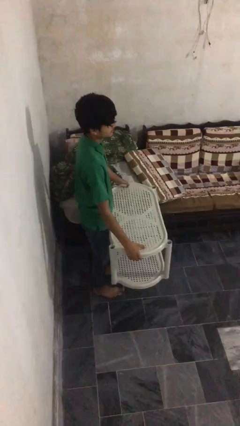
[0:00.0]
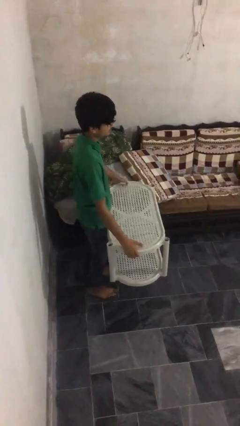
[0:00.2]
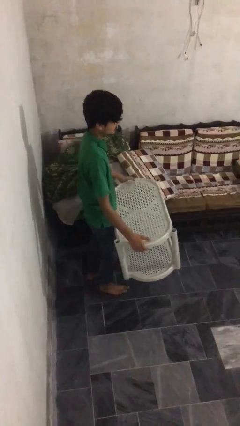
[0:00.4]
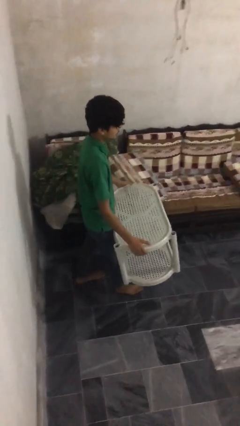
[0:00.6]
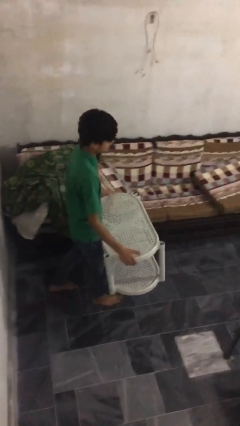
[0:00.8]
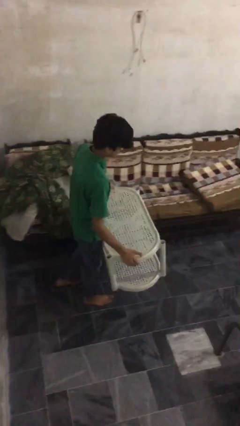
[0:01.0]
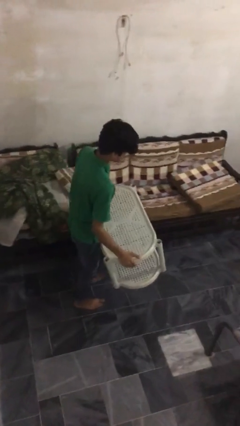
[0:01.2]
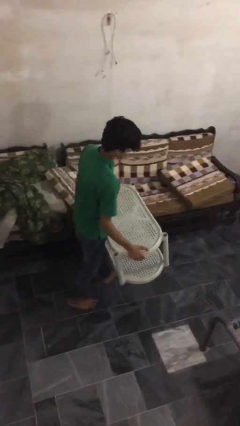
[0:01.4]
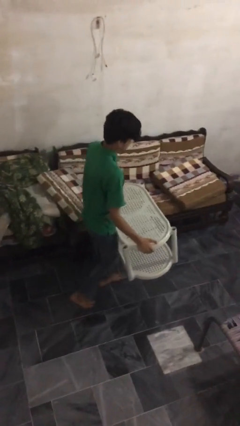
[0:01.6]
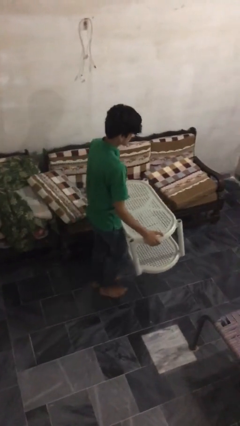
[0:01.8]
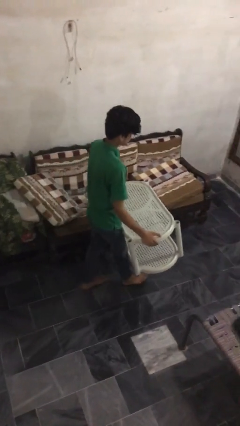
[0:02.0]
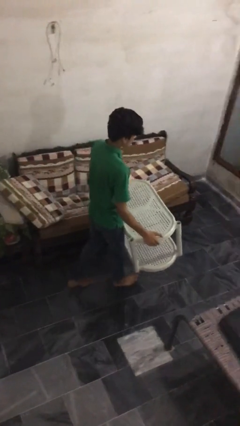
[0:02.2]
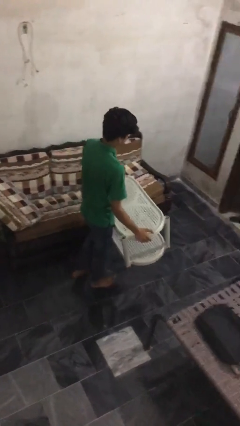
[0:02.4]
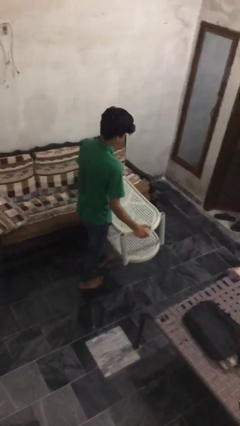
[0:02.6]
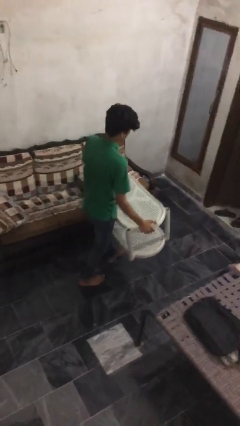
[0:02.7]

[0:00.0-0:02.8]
person carries heavy object

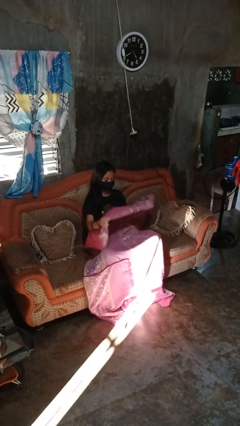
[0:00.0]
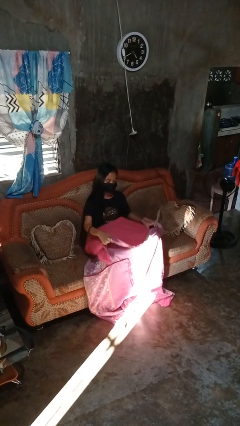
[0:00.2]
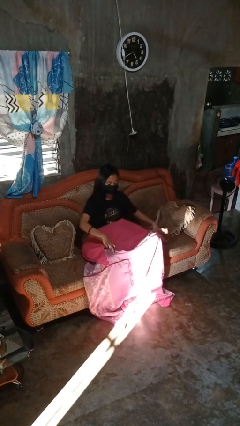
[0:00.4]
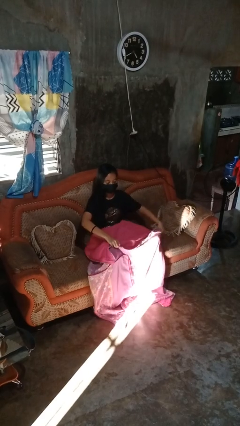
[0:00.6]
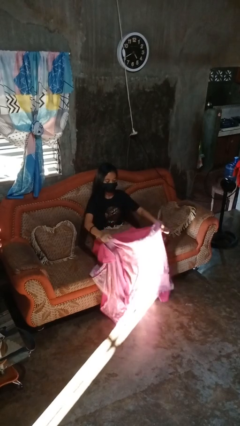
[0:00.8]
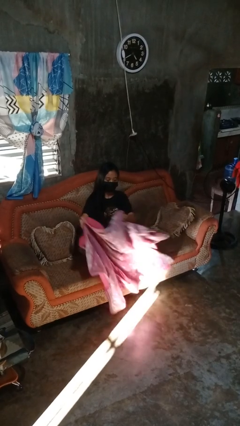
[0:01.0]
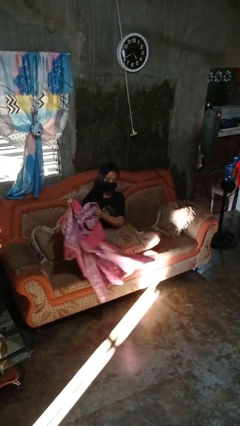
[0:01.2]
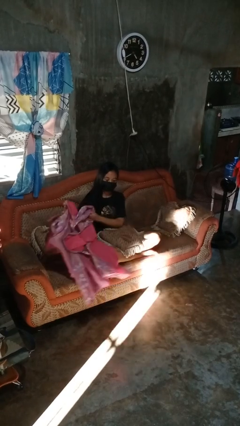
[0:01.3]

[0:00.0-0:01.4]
person uncovers with blanket

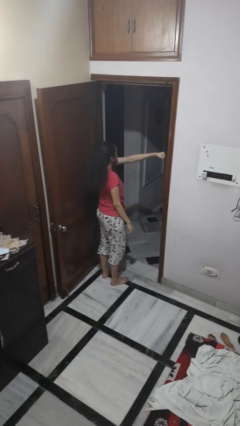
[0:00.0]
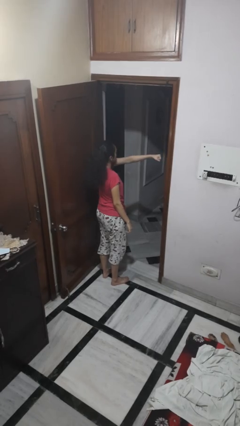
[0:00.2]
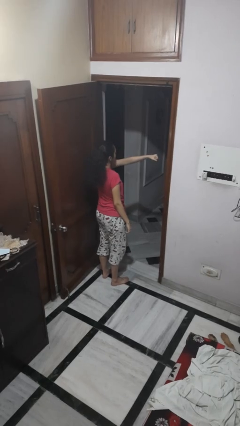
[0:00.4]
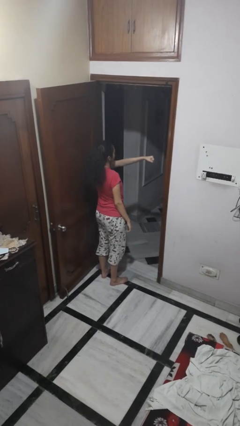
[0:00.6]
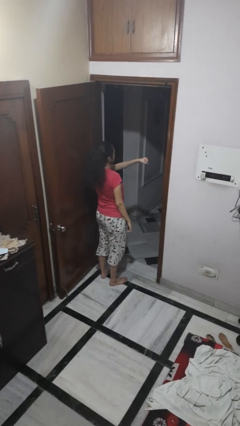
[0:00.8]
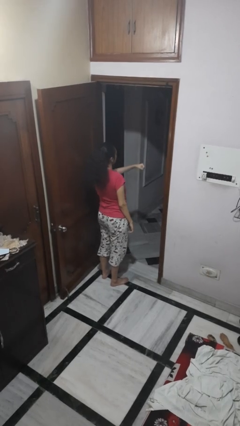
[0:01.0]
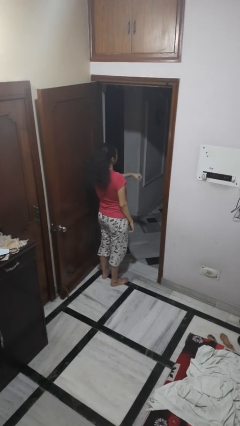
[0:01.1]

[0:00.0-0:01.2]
person punches

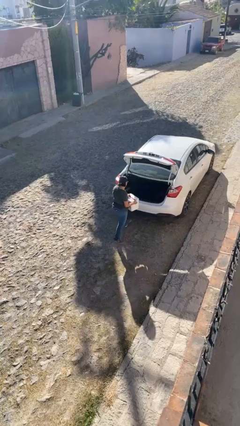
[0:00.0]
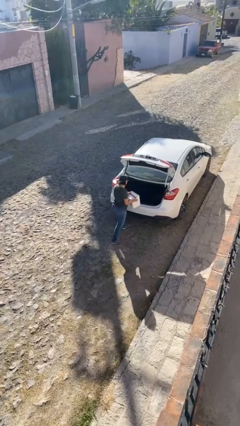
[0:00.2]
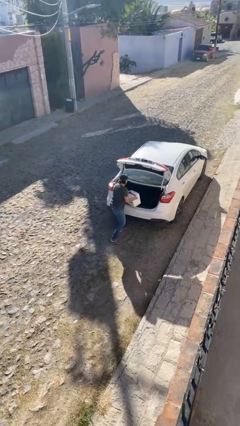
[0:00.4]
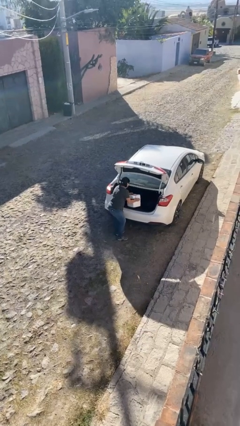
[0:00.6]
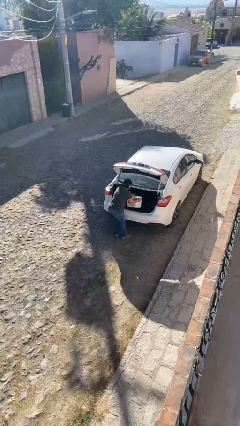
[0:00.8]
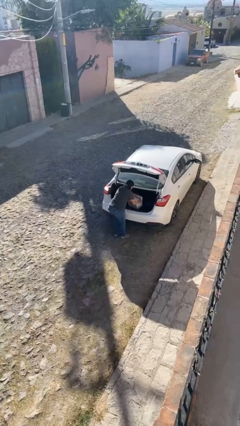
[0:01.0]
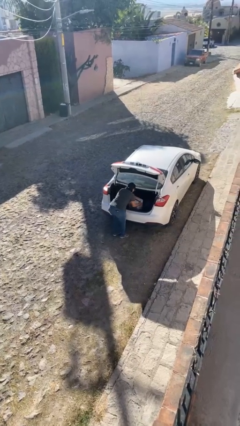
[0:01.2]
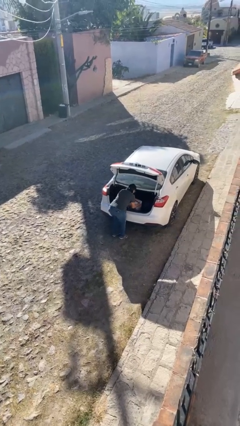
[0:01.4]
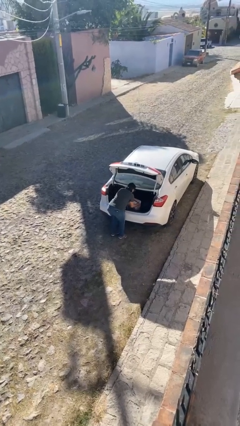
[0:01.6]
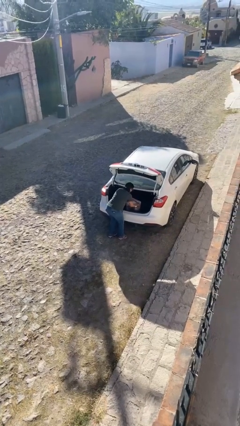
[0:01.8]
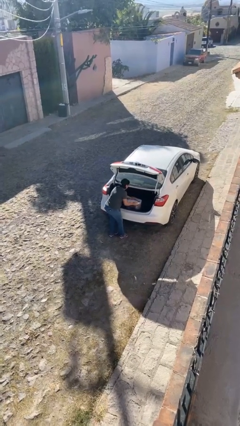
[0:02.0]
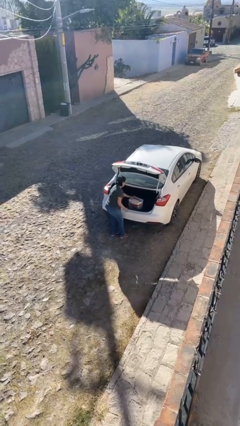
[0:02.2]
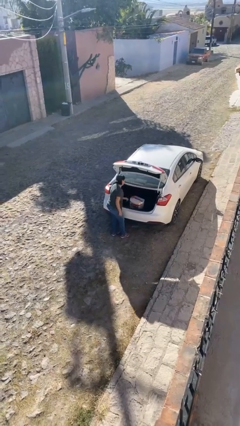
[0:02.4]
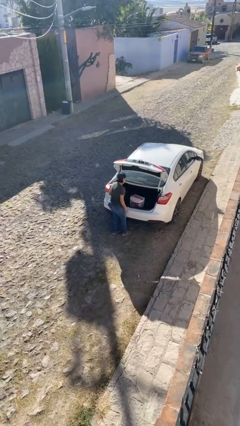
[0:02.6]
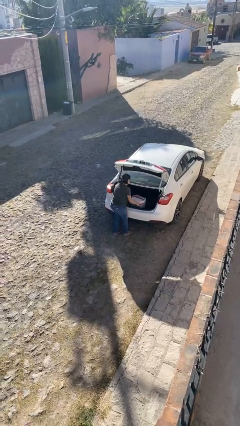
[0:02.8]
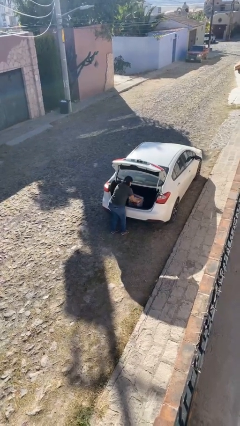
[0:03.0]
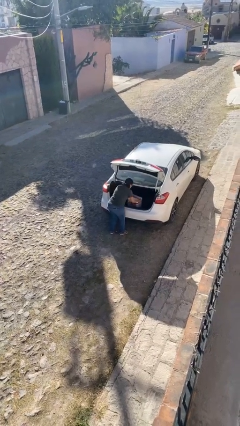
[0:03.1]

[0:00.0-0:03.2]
person loads car

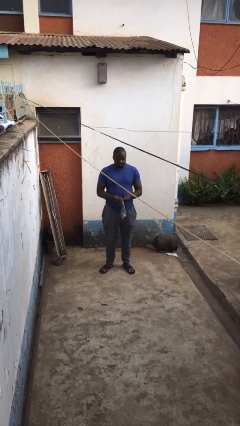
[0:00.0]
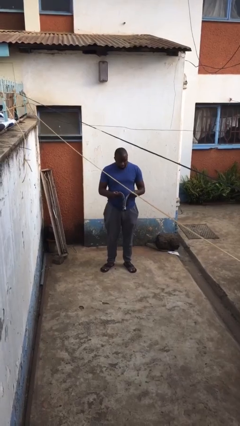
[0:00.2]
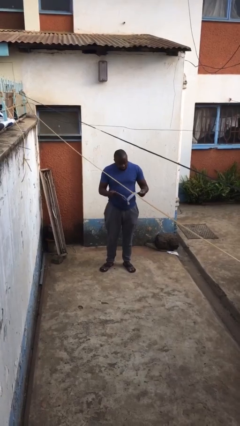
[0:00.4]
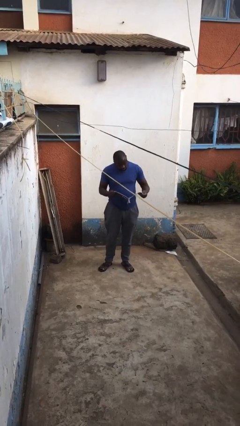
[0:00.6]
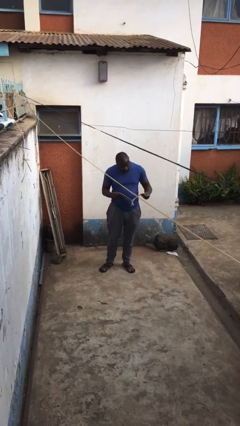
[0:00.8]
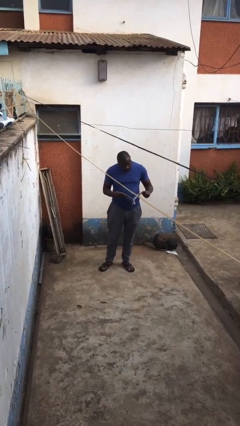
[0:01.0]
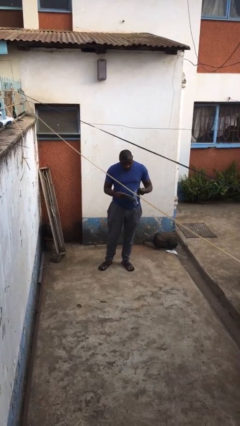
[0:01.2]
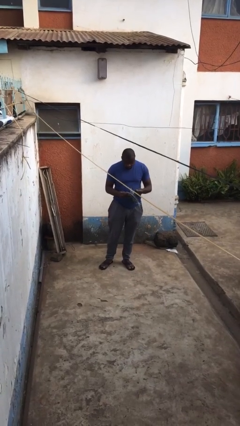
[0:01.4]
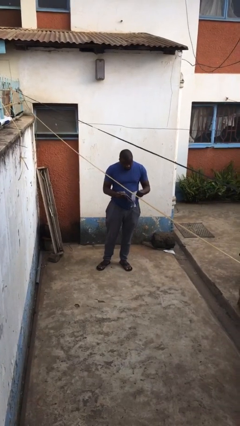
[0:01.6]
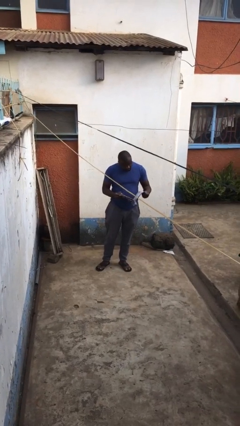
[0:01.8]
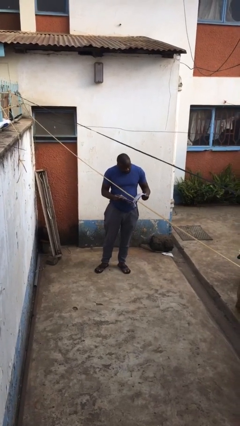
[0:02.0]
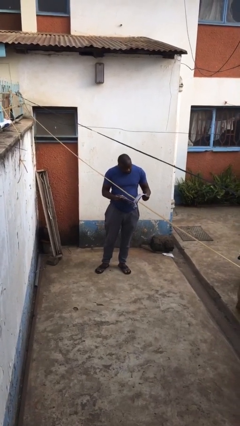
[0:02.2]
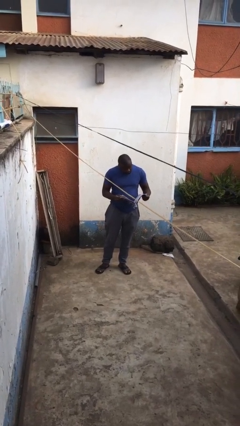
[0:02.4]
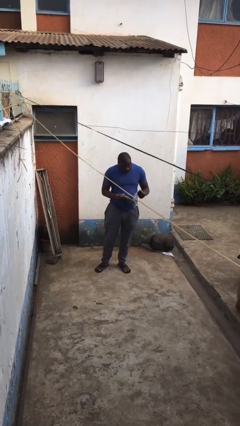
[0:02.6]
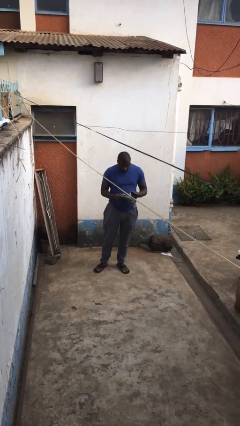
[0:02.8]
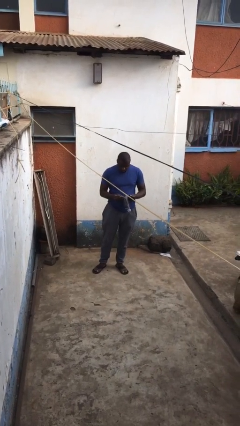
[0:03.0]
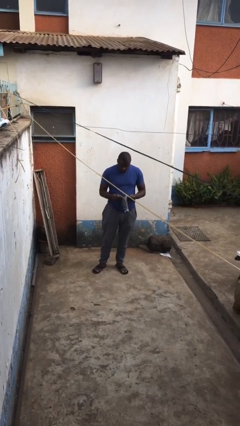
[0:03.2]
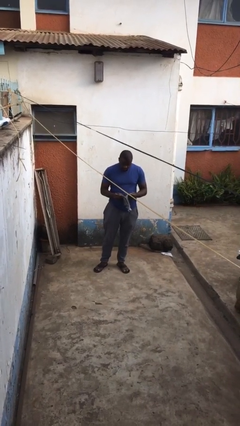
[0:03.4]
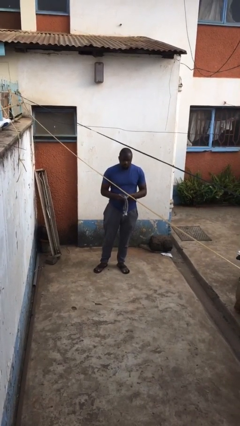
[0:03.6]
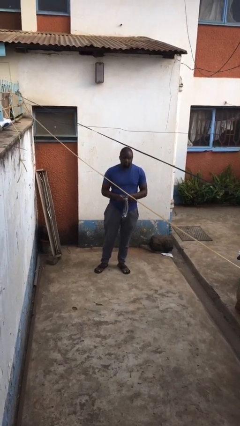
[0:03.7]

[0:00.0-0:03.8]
person reads magazine

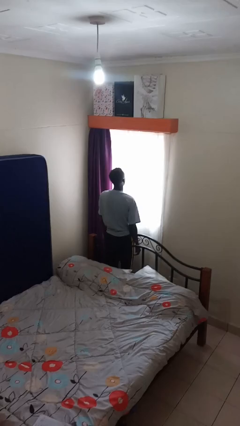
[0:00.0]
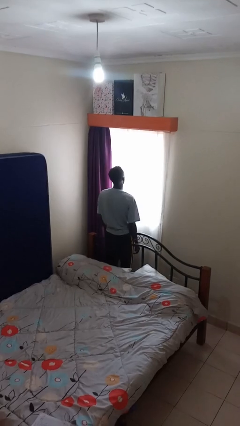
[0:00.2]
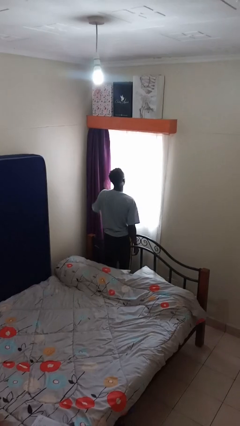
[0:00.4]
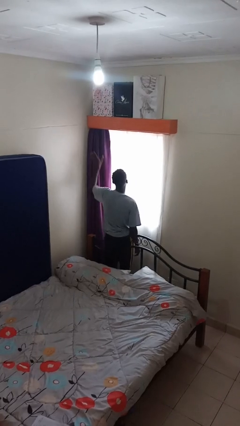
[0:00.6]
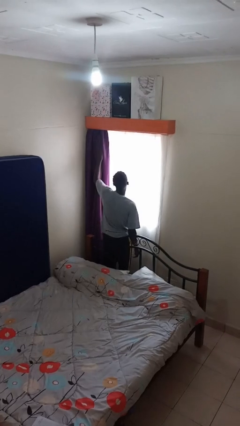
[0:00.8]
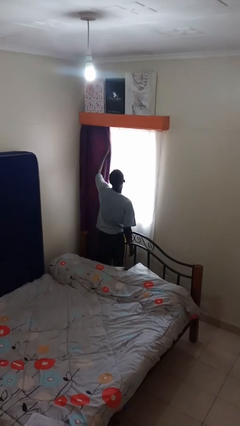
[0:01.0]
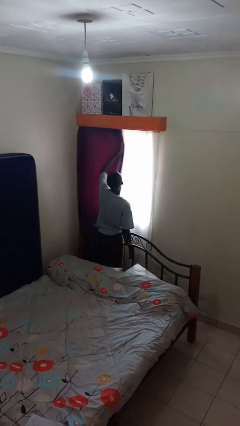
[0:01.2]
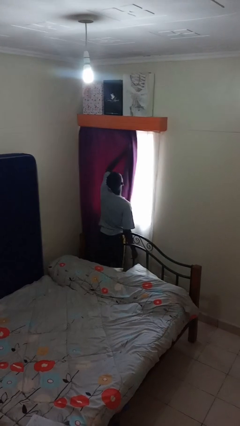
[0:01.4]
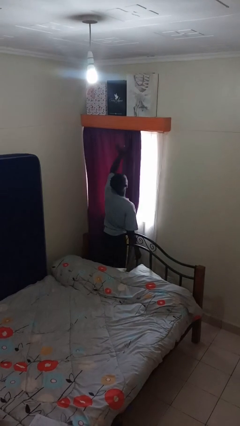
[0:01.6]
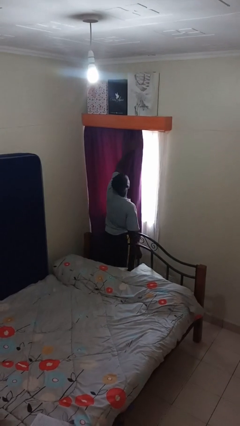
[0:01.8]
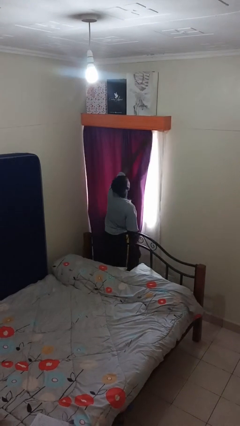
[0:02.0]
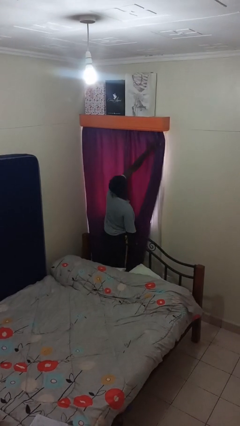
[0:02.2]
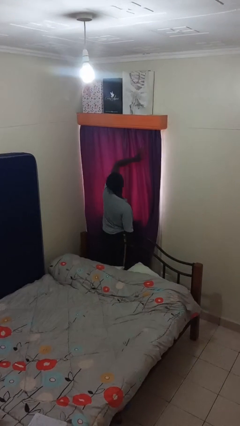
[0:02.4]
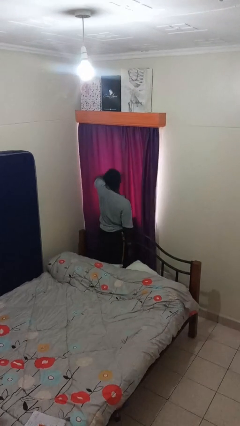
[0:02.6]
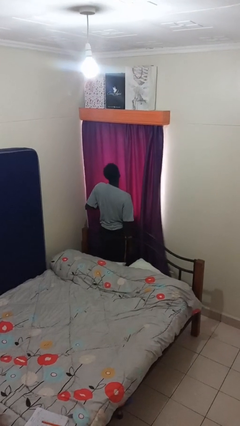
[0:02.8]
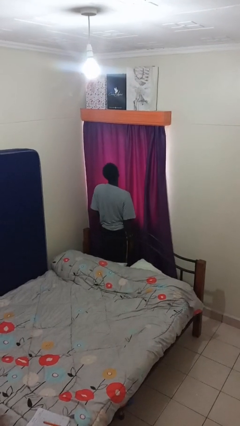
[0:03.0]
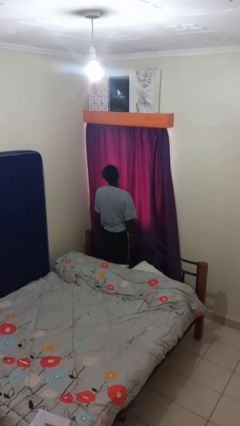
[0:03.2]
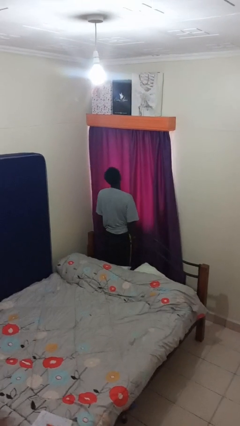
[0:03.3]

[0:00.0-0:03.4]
person closes curtains

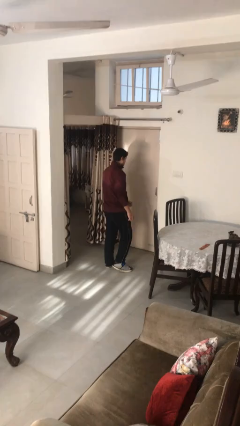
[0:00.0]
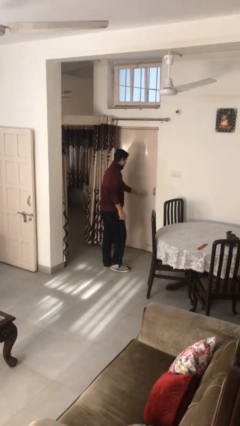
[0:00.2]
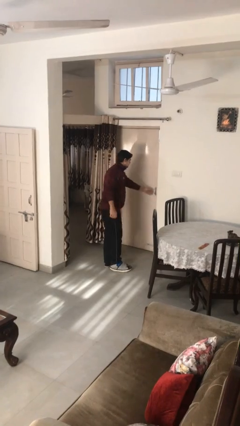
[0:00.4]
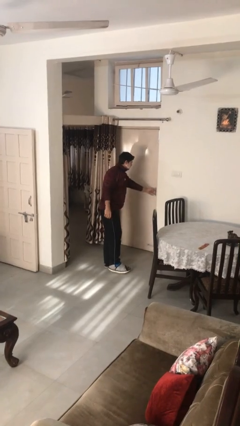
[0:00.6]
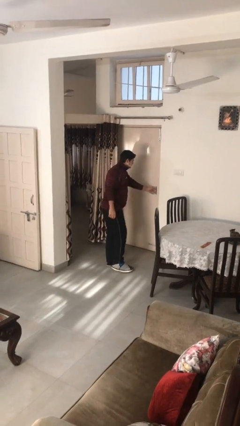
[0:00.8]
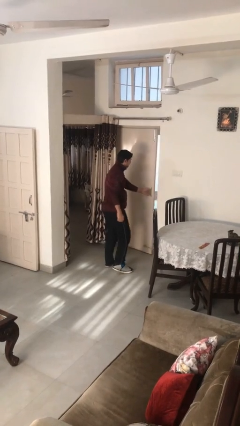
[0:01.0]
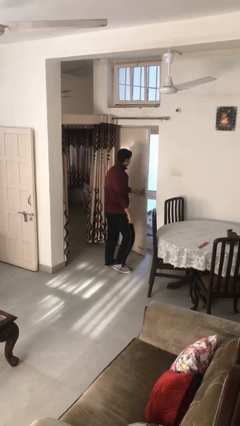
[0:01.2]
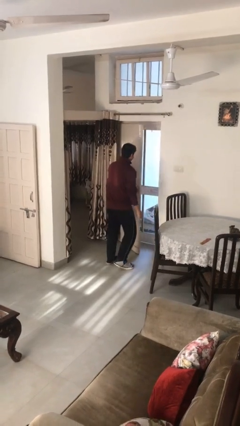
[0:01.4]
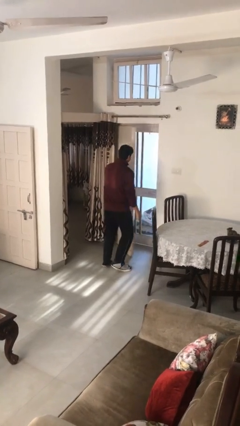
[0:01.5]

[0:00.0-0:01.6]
person opens facility door
